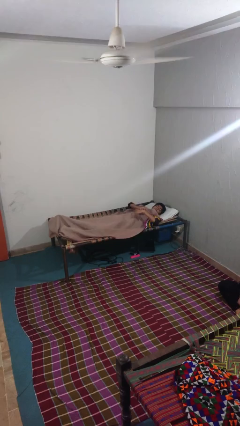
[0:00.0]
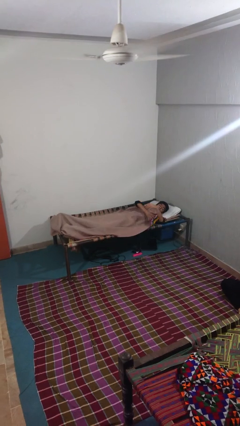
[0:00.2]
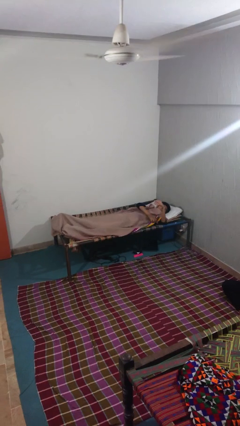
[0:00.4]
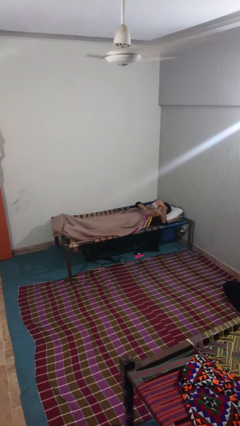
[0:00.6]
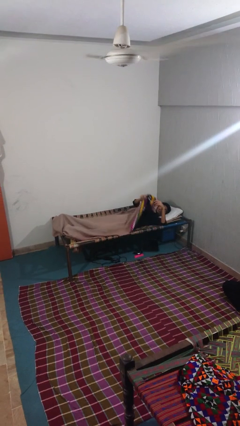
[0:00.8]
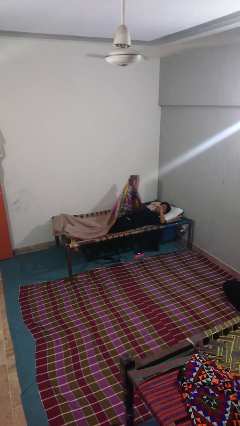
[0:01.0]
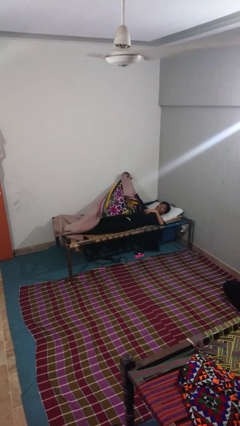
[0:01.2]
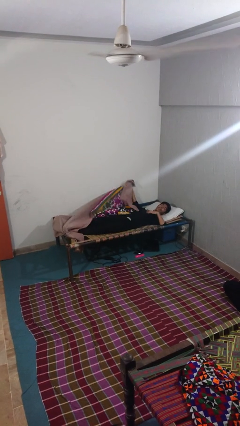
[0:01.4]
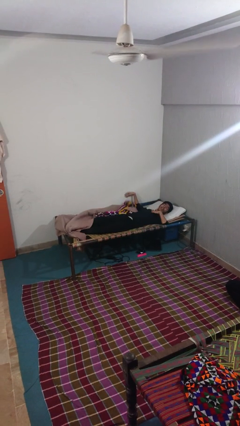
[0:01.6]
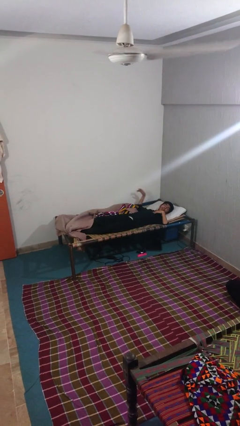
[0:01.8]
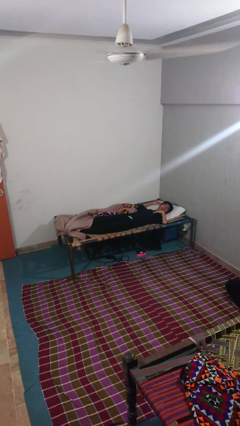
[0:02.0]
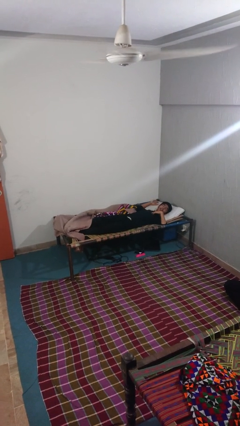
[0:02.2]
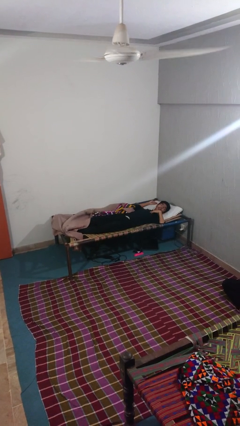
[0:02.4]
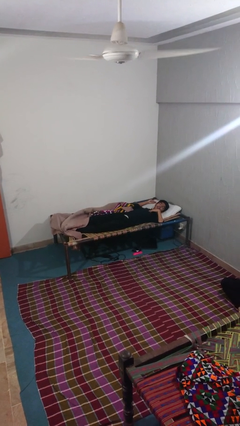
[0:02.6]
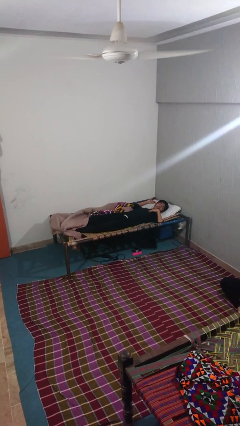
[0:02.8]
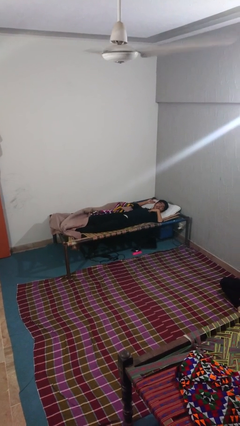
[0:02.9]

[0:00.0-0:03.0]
person uncovers with blanket

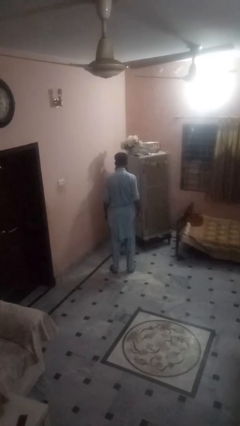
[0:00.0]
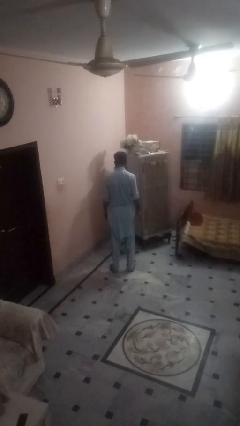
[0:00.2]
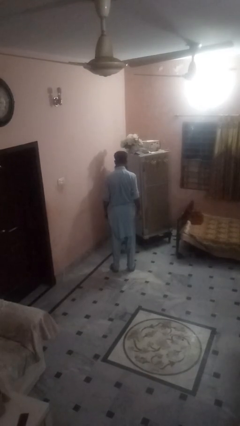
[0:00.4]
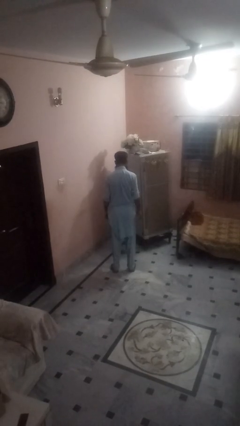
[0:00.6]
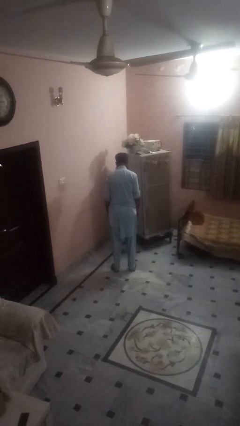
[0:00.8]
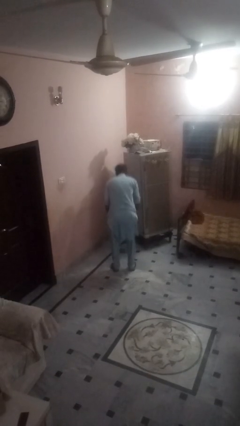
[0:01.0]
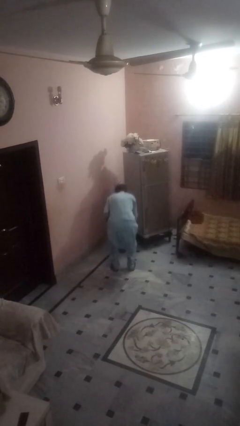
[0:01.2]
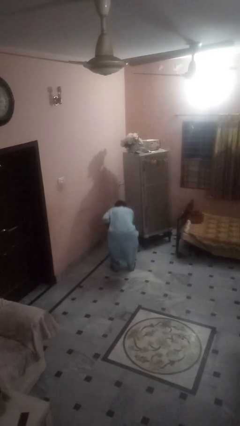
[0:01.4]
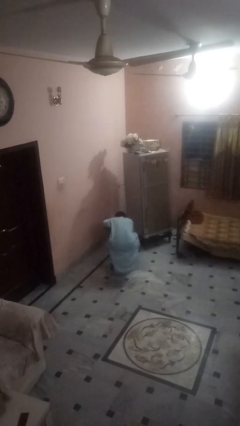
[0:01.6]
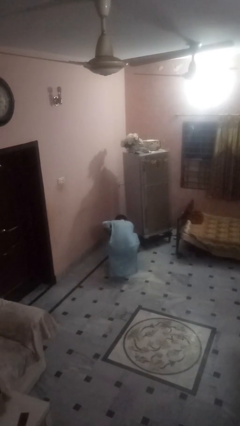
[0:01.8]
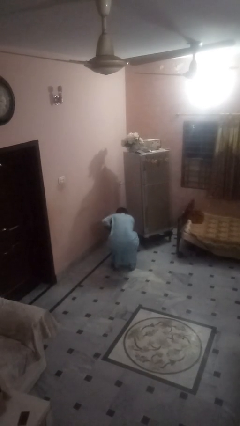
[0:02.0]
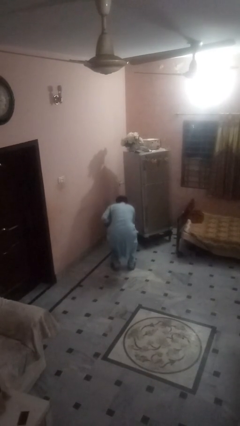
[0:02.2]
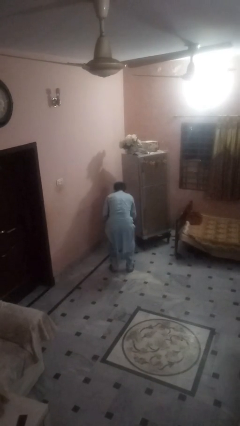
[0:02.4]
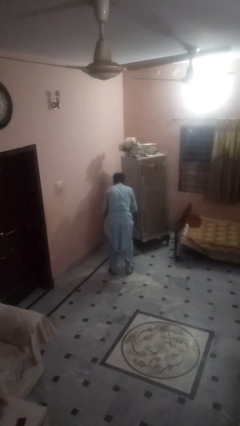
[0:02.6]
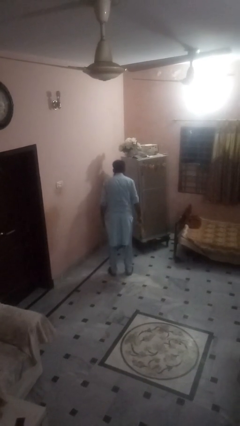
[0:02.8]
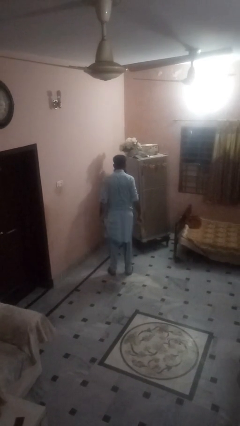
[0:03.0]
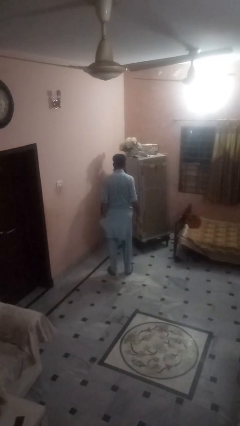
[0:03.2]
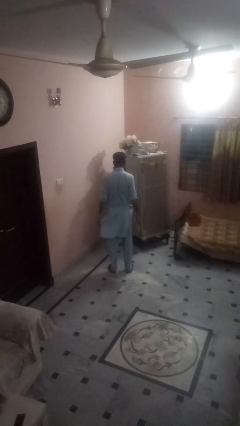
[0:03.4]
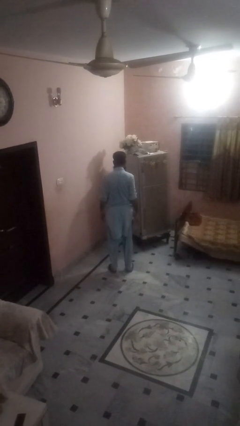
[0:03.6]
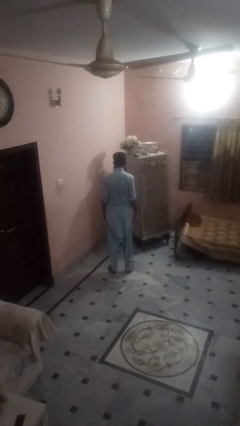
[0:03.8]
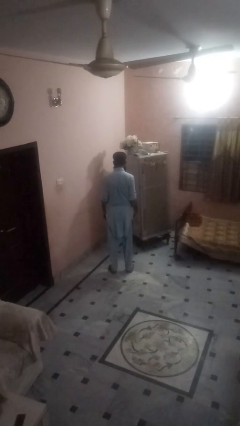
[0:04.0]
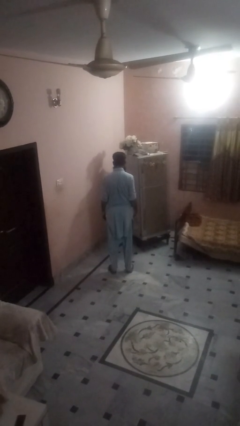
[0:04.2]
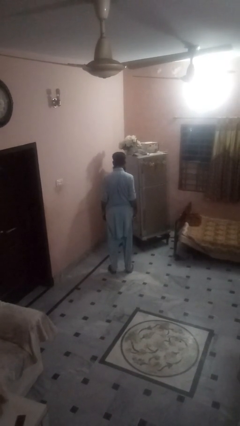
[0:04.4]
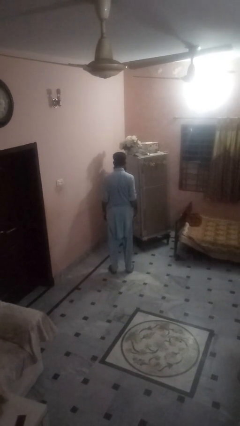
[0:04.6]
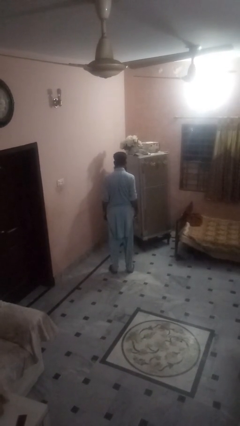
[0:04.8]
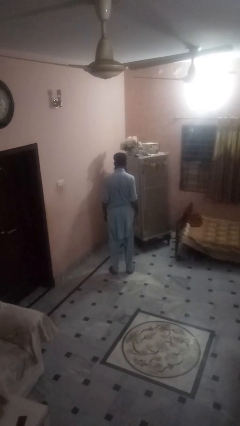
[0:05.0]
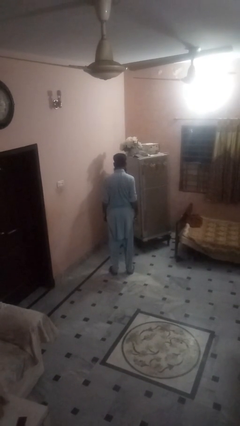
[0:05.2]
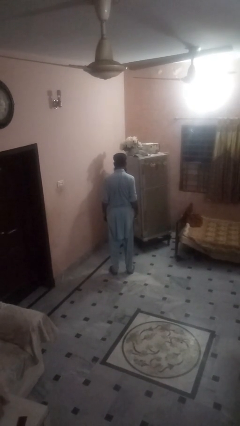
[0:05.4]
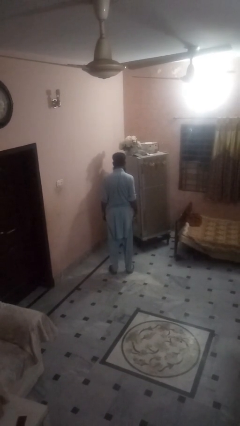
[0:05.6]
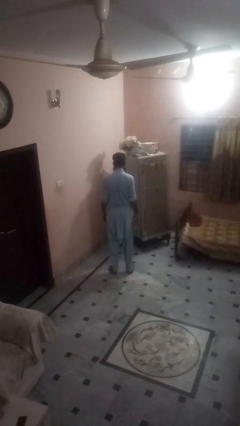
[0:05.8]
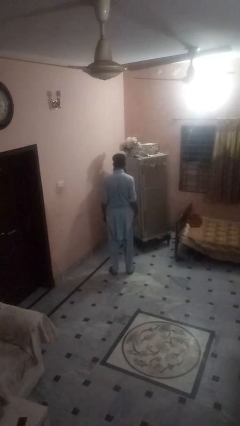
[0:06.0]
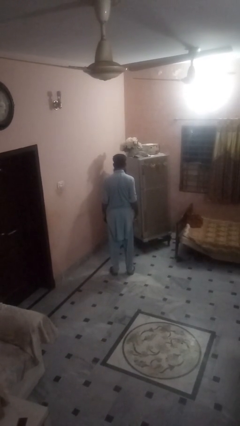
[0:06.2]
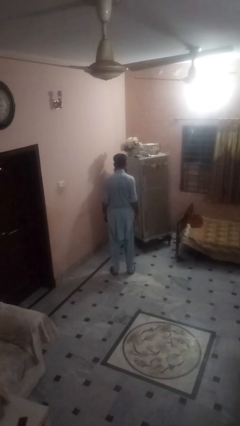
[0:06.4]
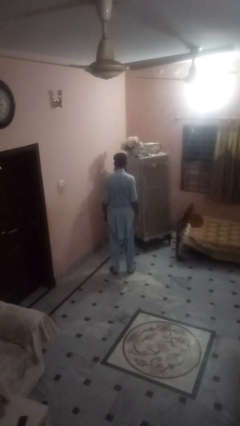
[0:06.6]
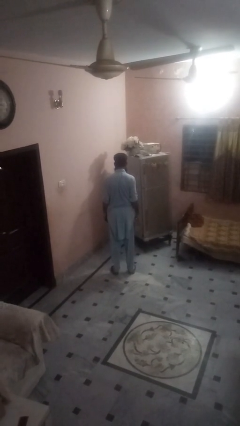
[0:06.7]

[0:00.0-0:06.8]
person picks up object from floor

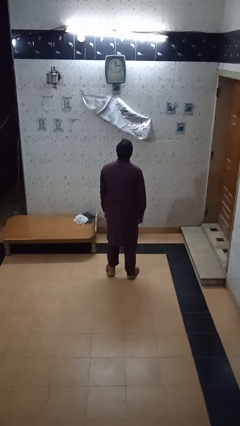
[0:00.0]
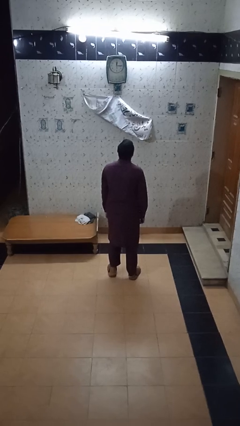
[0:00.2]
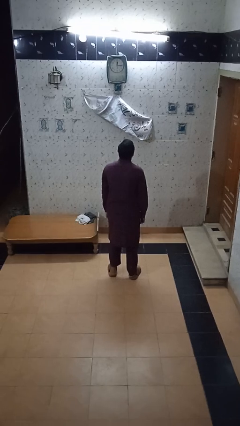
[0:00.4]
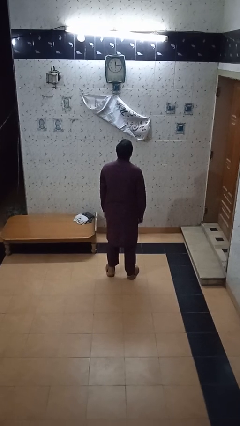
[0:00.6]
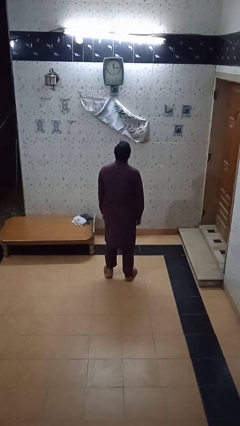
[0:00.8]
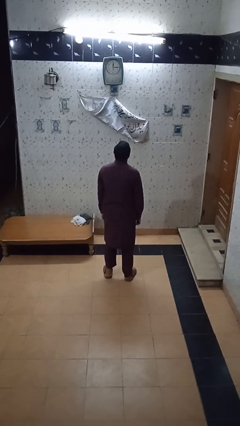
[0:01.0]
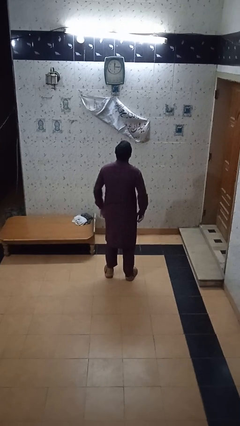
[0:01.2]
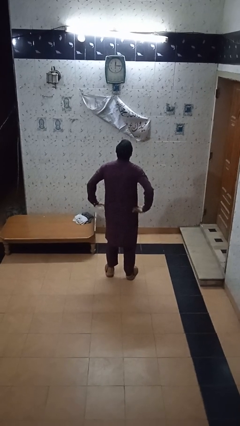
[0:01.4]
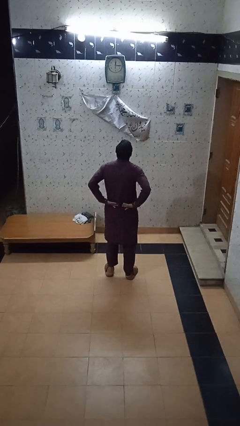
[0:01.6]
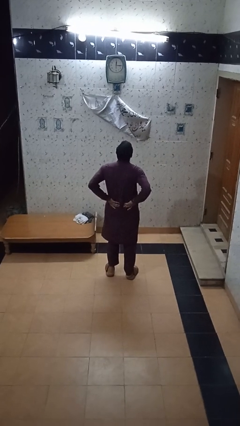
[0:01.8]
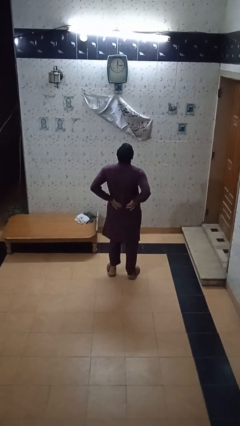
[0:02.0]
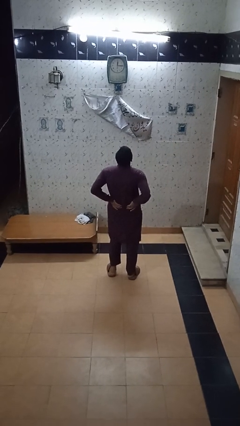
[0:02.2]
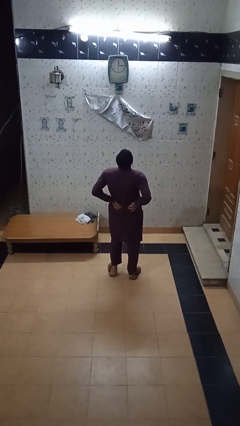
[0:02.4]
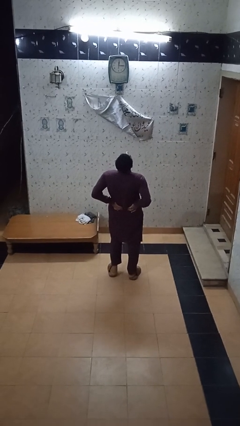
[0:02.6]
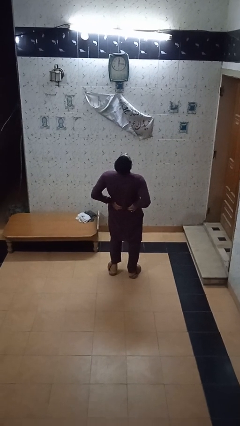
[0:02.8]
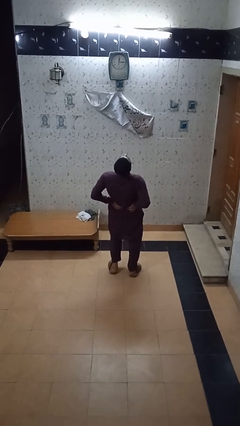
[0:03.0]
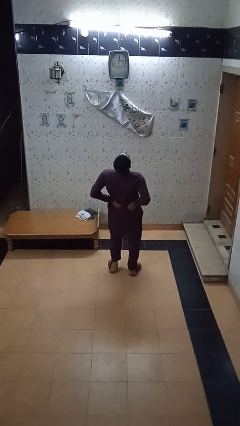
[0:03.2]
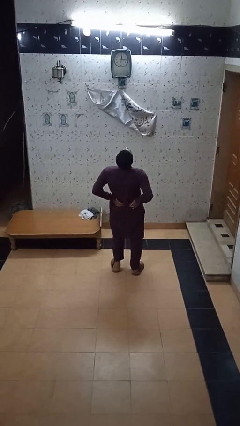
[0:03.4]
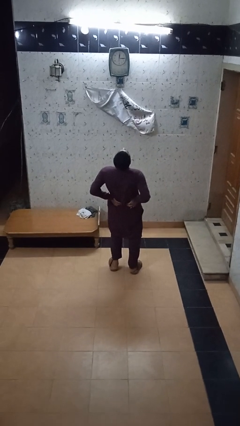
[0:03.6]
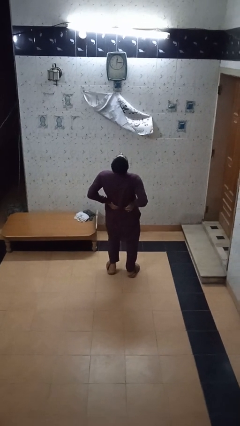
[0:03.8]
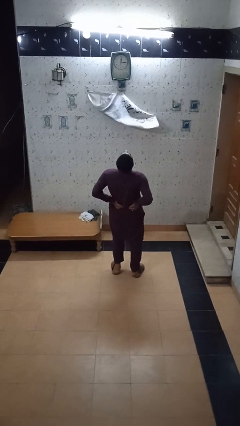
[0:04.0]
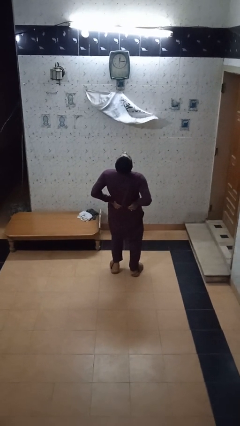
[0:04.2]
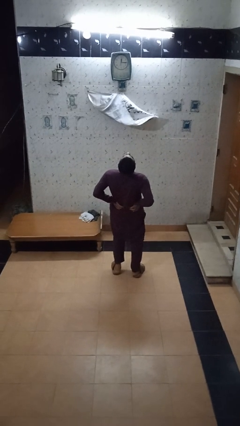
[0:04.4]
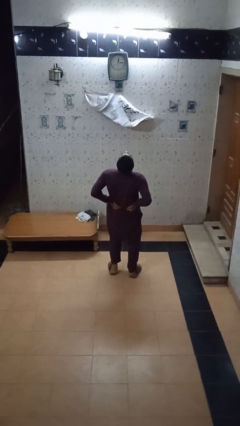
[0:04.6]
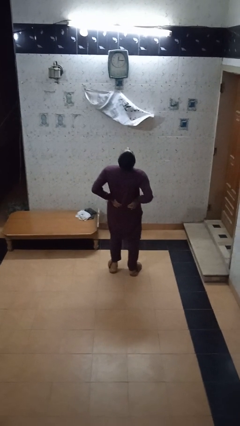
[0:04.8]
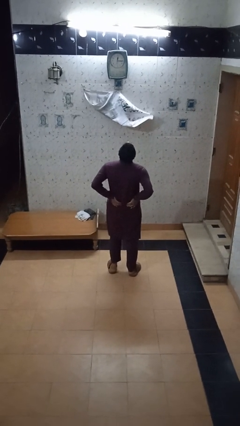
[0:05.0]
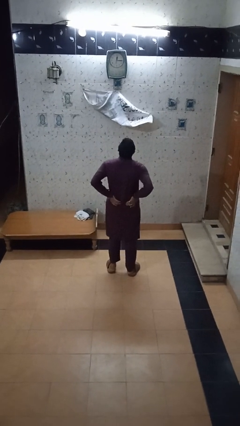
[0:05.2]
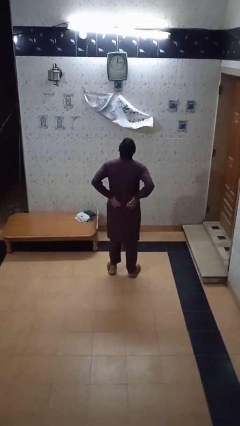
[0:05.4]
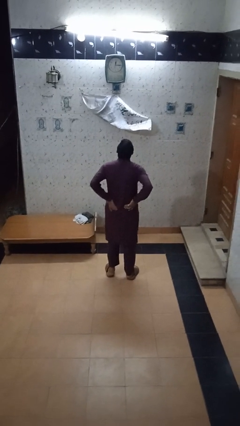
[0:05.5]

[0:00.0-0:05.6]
person stretches back

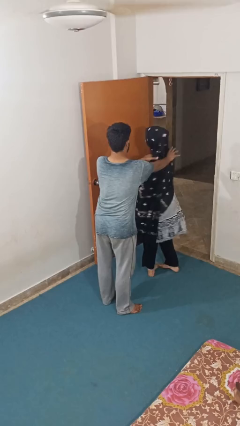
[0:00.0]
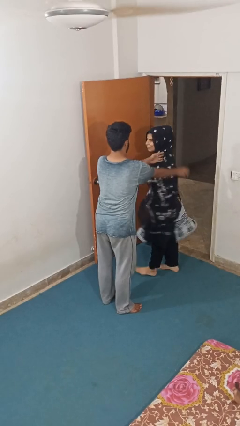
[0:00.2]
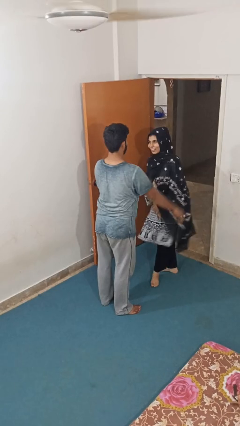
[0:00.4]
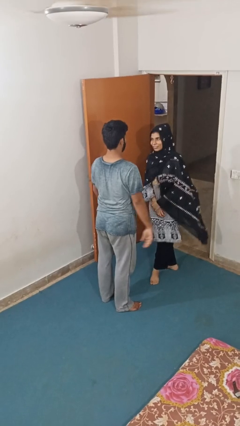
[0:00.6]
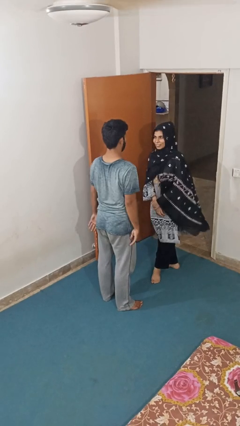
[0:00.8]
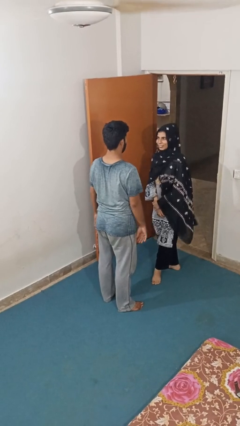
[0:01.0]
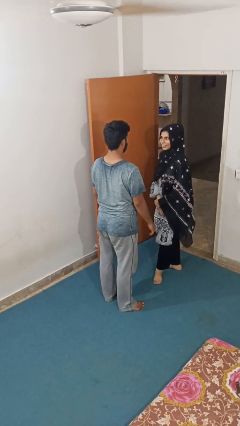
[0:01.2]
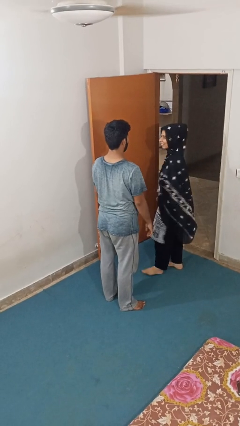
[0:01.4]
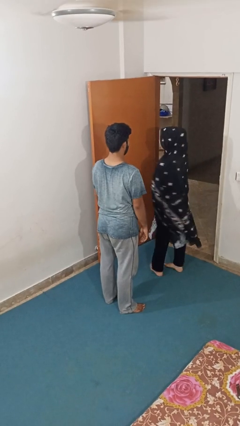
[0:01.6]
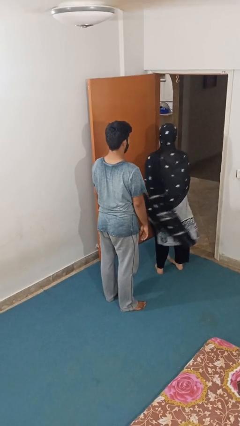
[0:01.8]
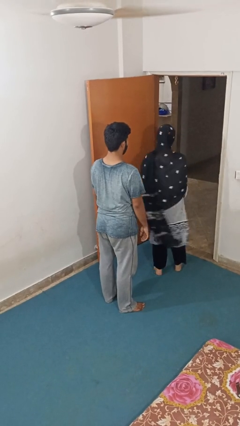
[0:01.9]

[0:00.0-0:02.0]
person spins person around

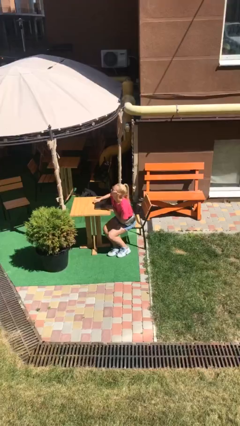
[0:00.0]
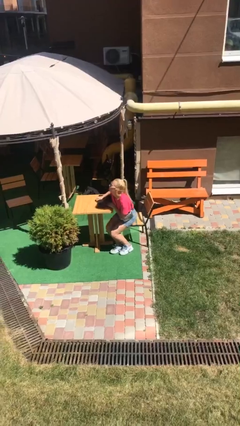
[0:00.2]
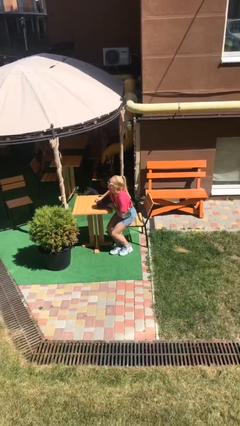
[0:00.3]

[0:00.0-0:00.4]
person stands up
